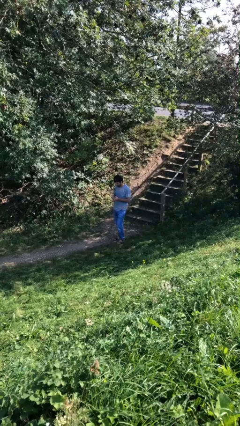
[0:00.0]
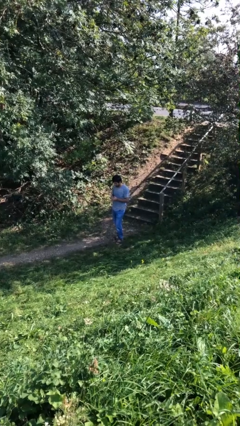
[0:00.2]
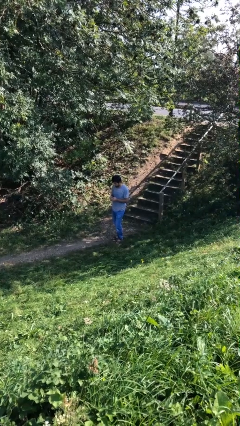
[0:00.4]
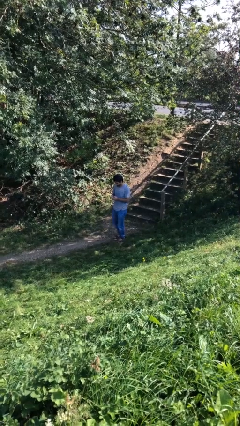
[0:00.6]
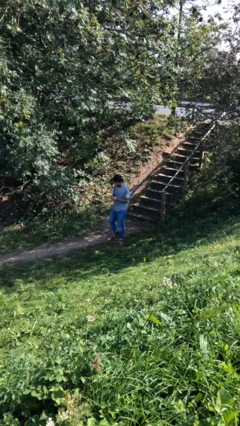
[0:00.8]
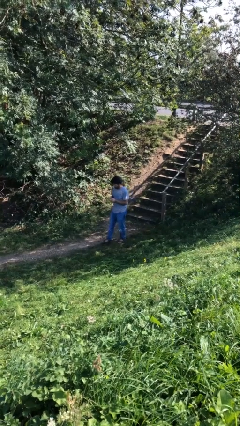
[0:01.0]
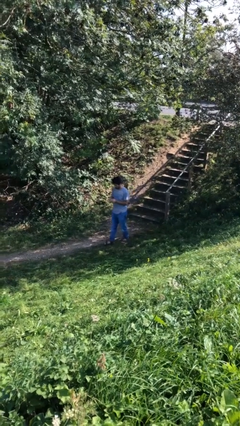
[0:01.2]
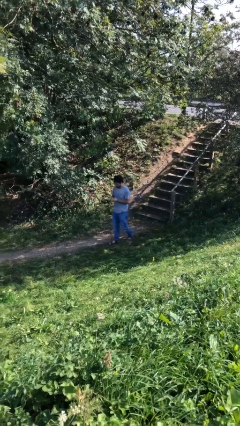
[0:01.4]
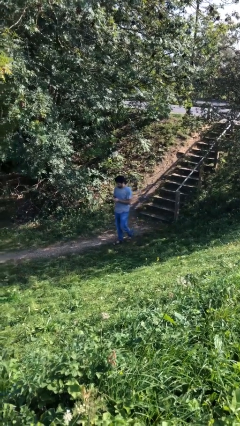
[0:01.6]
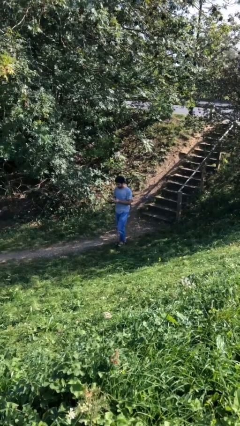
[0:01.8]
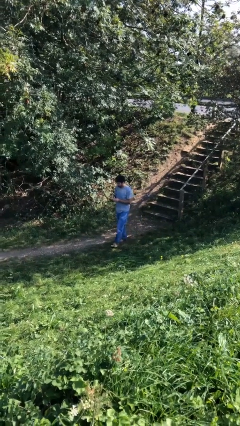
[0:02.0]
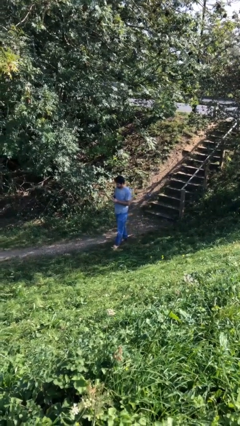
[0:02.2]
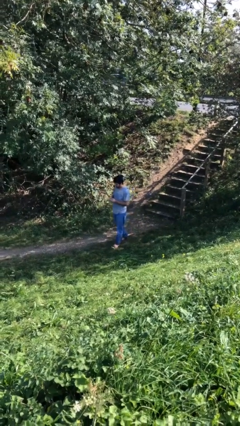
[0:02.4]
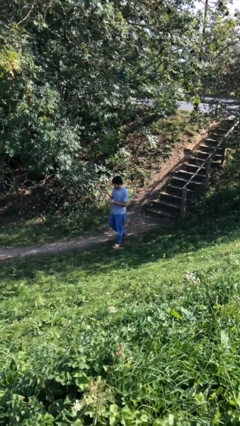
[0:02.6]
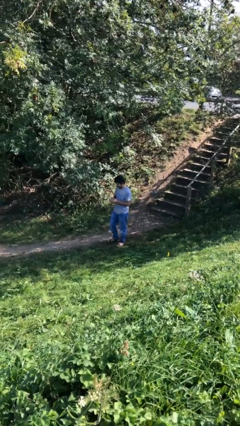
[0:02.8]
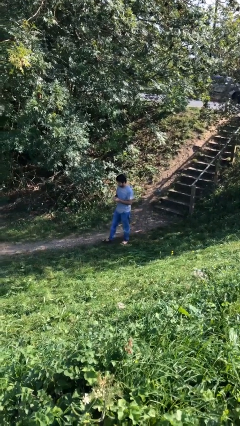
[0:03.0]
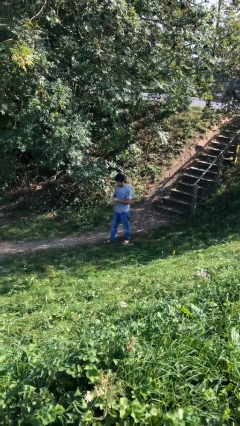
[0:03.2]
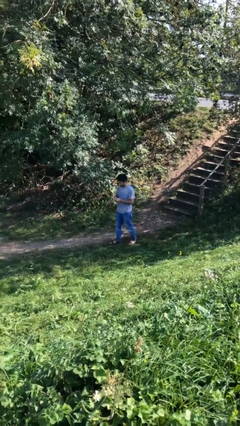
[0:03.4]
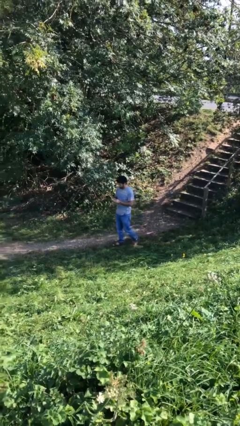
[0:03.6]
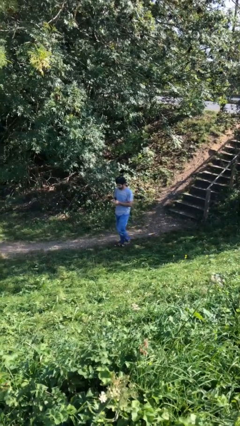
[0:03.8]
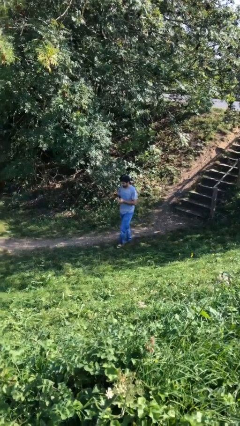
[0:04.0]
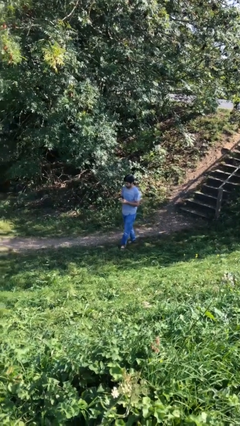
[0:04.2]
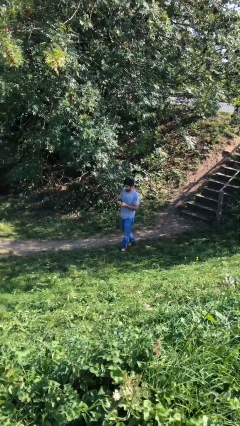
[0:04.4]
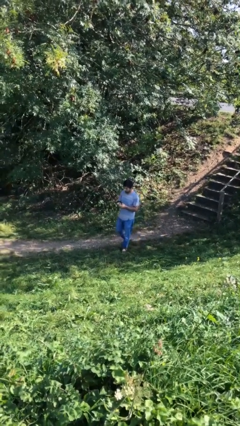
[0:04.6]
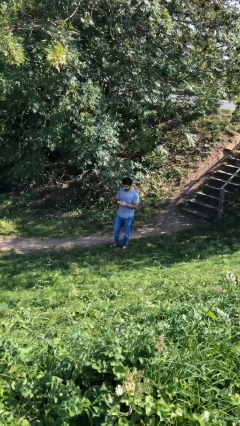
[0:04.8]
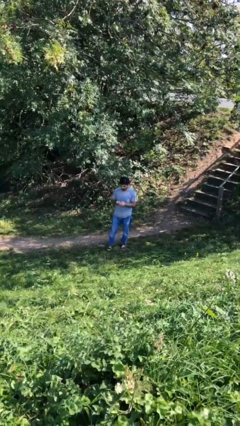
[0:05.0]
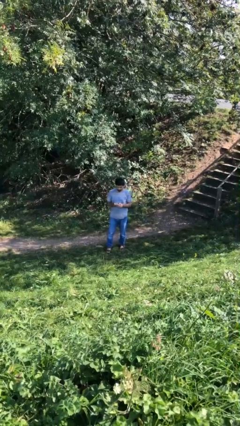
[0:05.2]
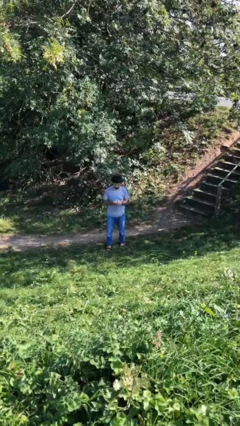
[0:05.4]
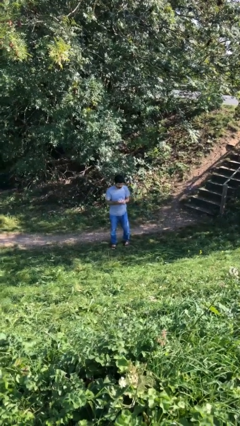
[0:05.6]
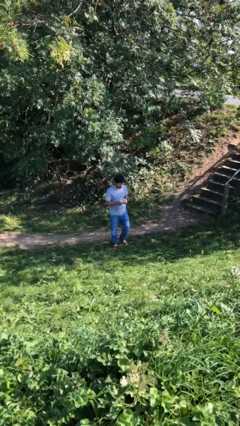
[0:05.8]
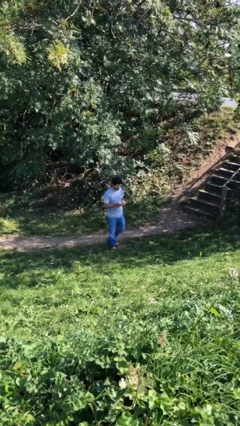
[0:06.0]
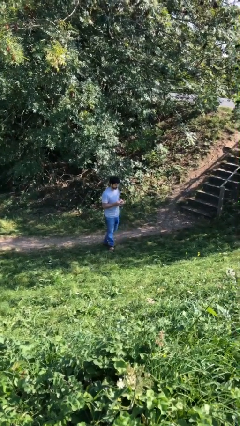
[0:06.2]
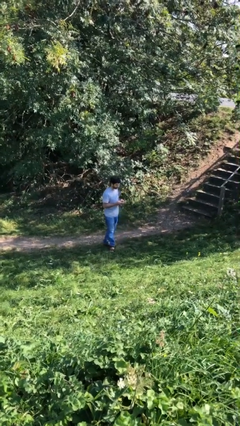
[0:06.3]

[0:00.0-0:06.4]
person texts on phone

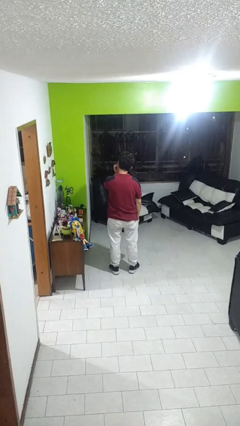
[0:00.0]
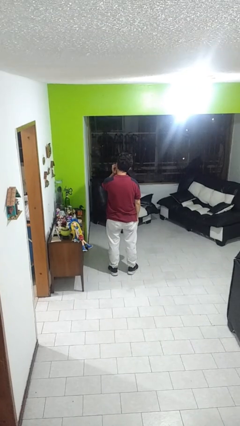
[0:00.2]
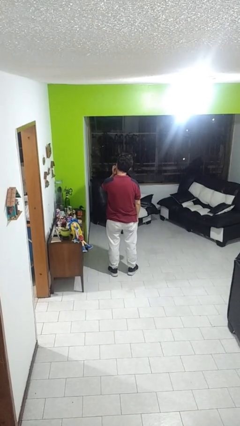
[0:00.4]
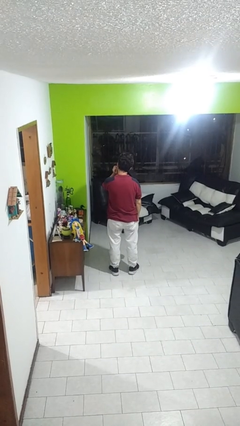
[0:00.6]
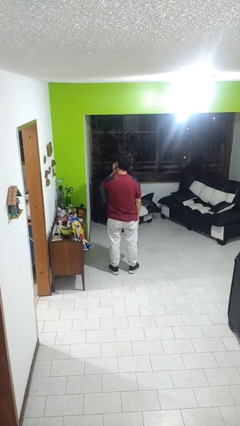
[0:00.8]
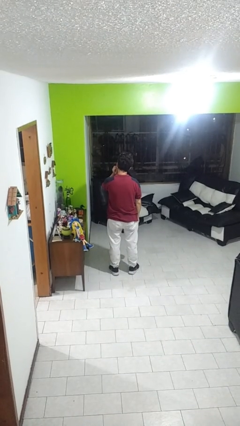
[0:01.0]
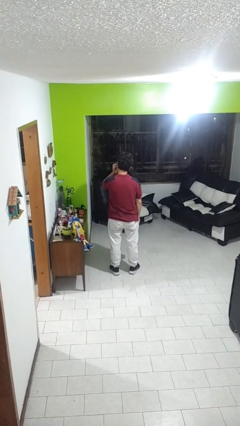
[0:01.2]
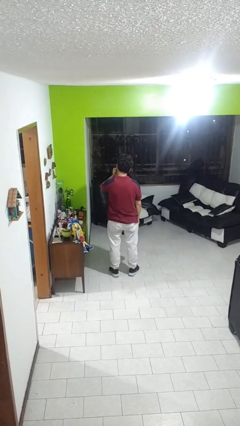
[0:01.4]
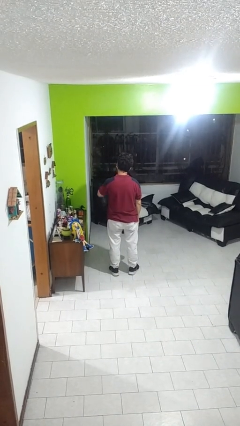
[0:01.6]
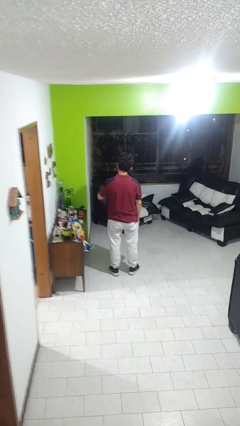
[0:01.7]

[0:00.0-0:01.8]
person scratches face

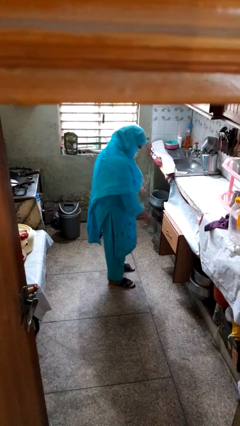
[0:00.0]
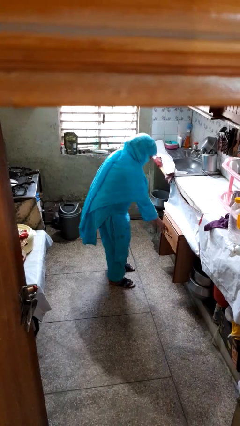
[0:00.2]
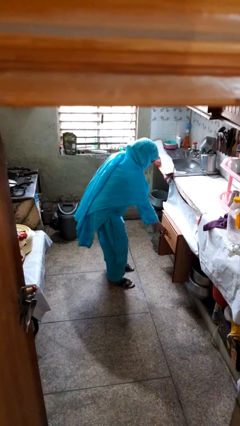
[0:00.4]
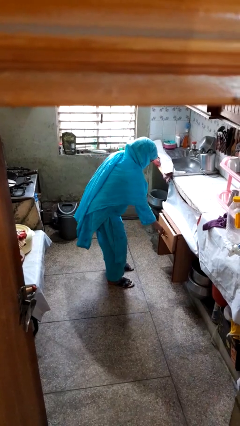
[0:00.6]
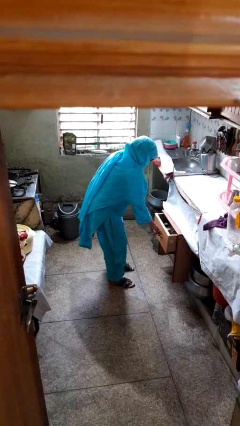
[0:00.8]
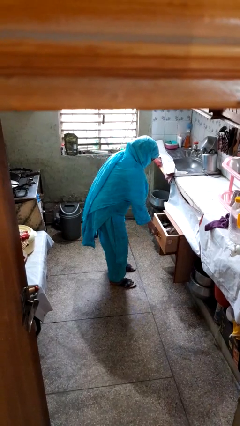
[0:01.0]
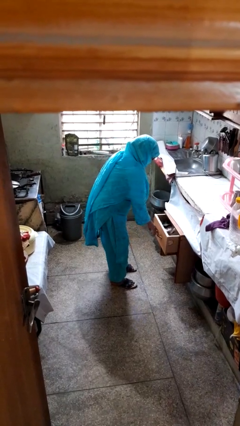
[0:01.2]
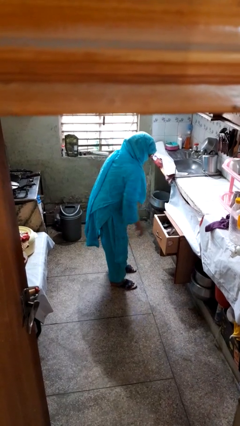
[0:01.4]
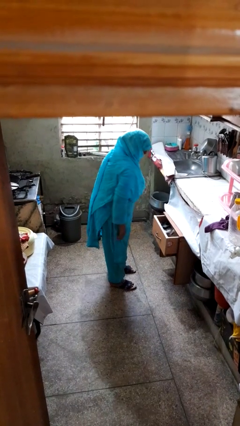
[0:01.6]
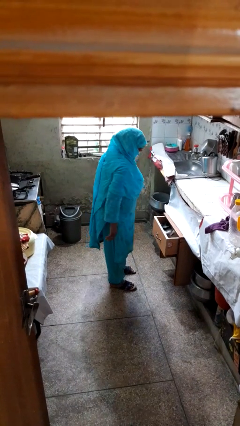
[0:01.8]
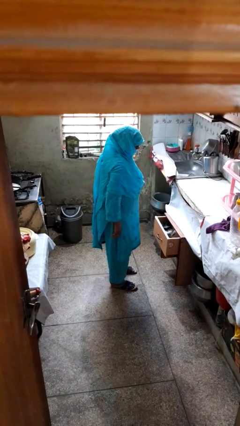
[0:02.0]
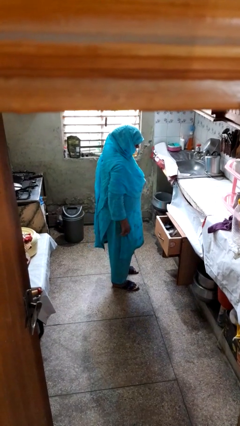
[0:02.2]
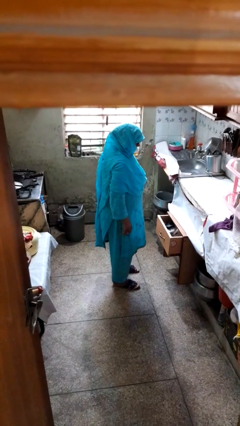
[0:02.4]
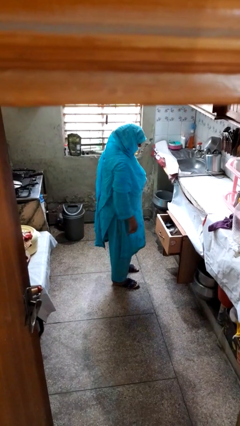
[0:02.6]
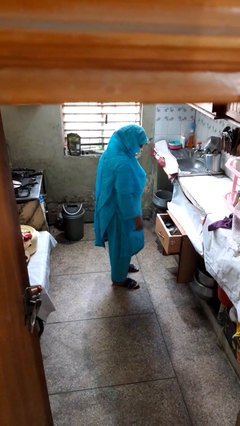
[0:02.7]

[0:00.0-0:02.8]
person opens kitchen drawer

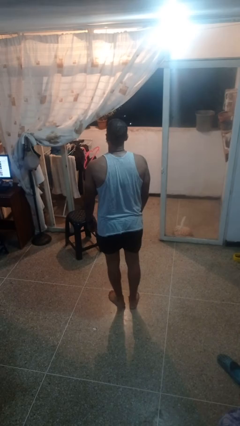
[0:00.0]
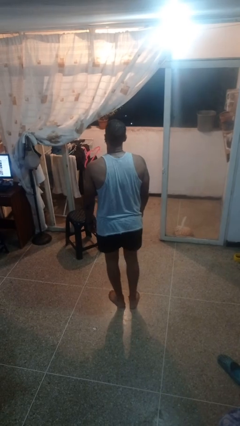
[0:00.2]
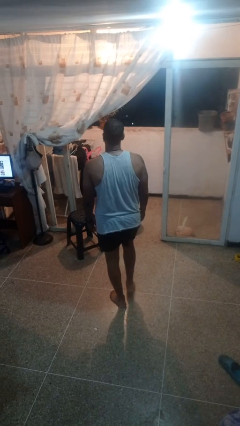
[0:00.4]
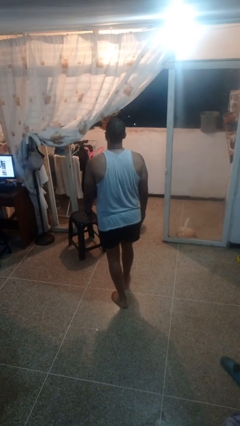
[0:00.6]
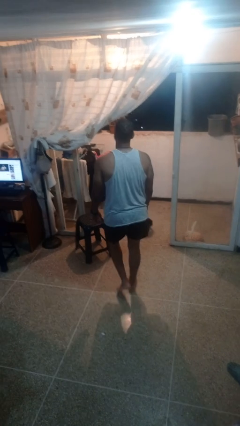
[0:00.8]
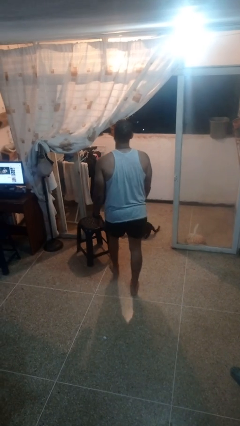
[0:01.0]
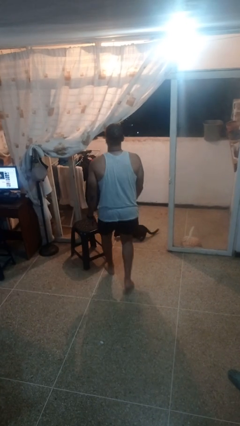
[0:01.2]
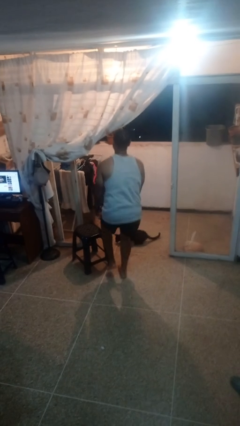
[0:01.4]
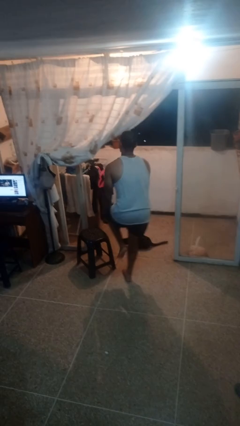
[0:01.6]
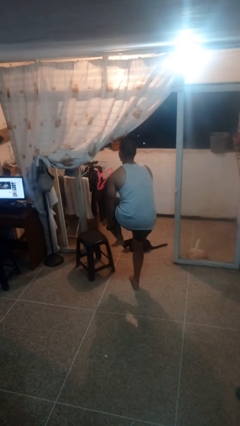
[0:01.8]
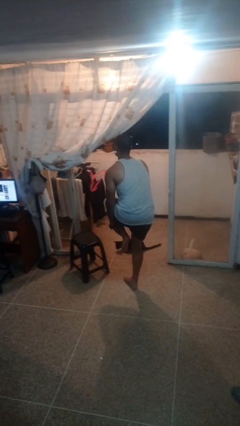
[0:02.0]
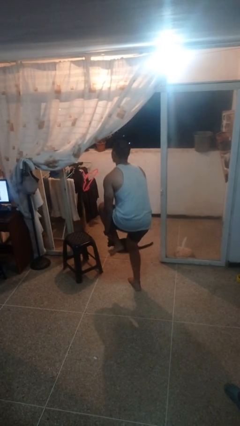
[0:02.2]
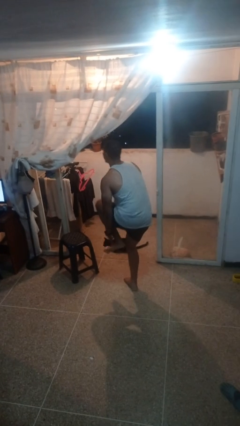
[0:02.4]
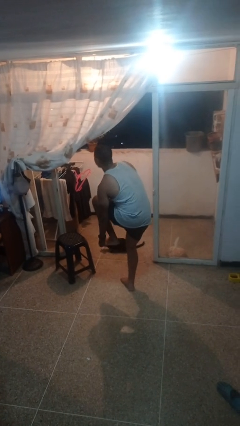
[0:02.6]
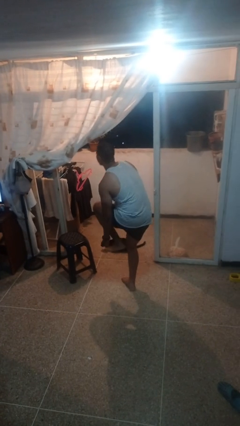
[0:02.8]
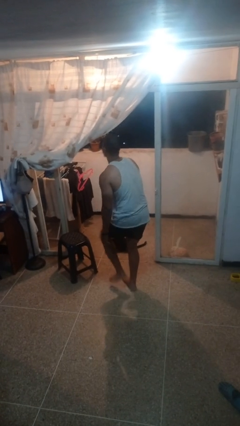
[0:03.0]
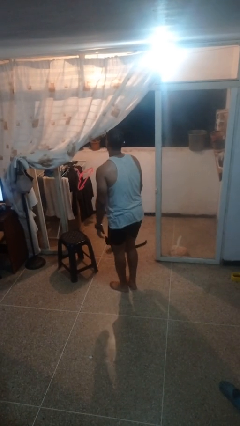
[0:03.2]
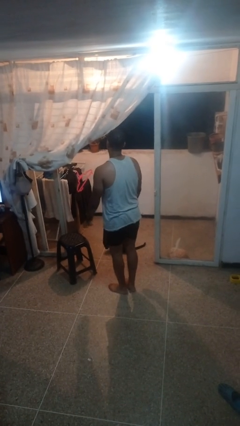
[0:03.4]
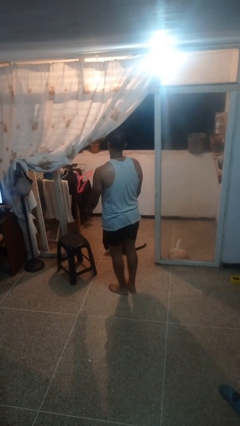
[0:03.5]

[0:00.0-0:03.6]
person stubs toe

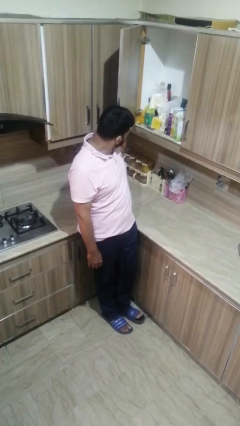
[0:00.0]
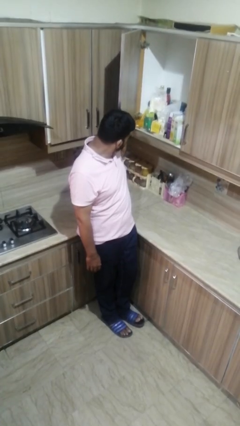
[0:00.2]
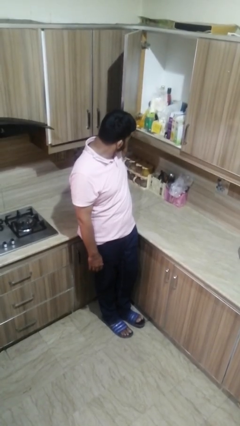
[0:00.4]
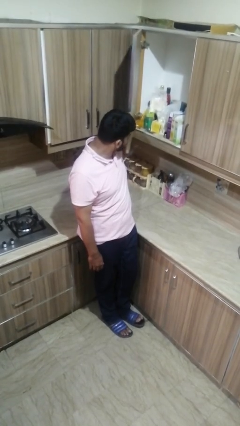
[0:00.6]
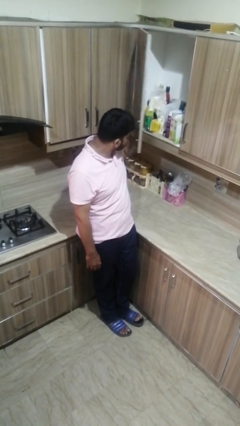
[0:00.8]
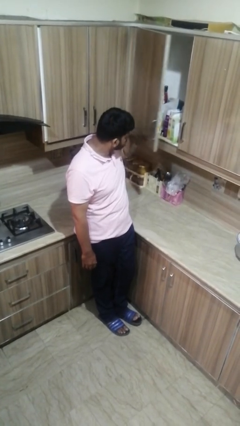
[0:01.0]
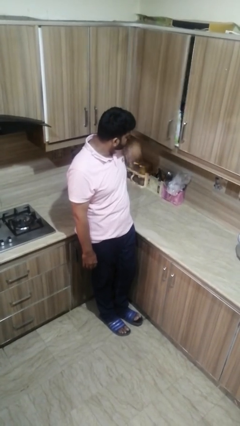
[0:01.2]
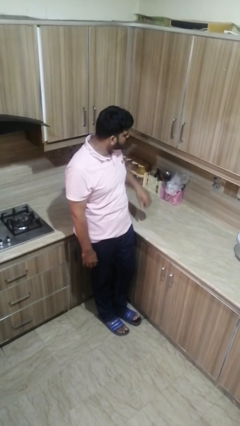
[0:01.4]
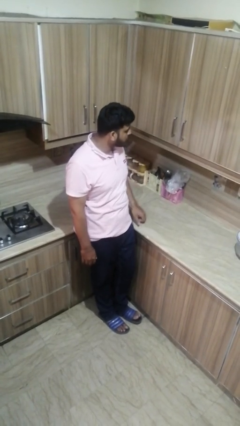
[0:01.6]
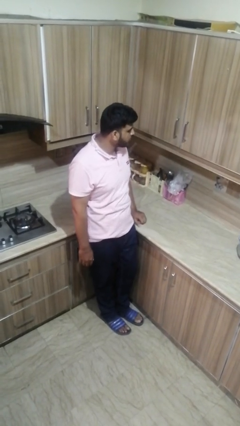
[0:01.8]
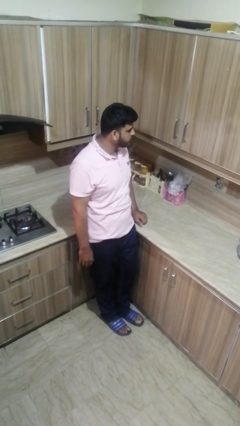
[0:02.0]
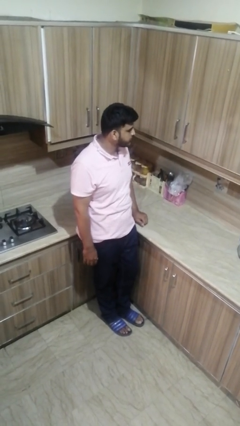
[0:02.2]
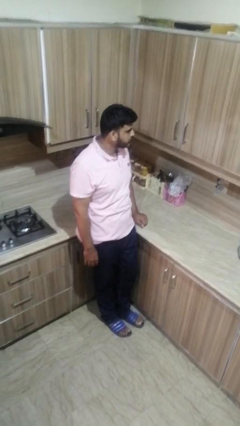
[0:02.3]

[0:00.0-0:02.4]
person closes cabinet

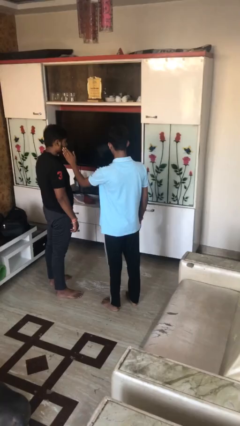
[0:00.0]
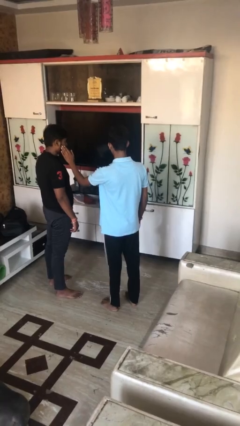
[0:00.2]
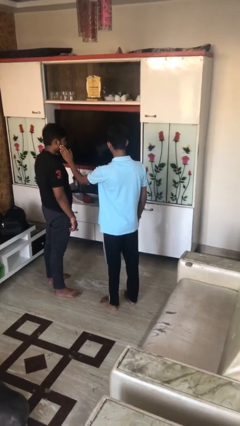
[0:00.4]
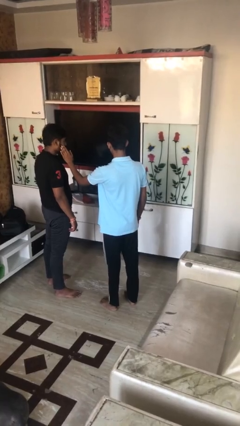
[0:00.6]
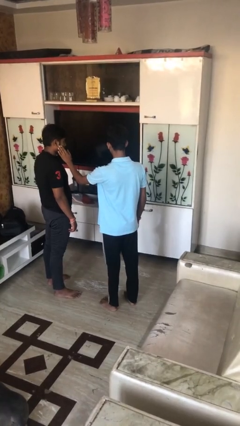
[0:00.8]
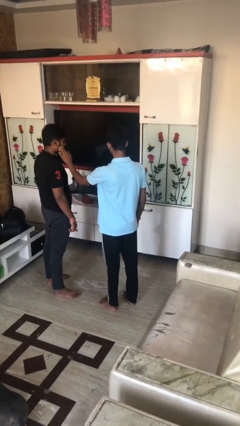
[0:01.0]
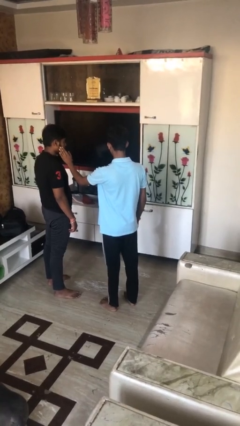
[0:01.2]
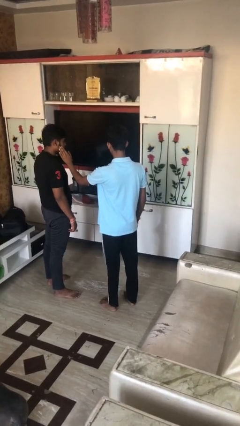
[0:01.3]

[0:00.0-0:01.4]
person touches face of person
